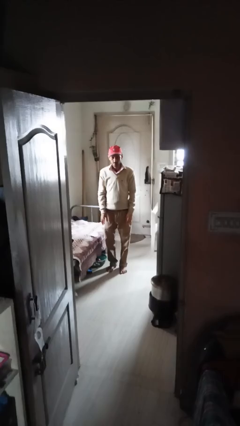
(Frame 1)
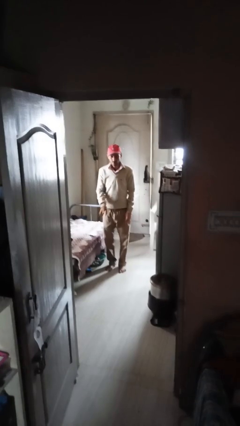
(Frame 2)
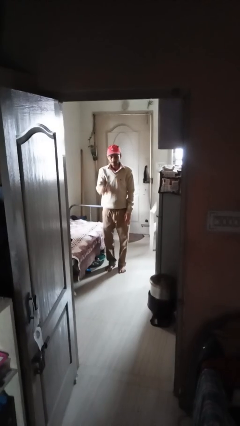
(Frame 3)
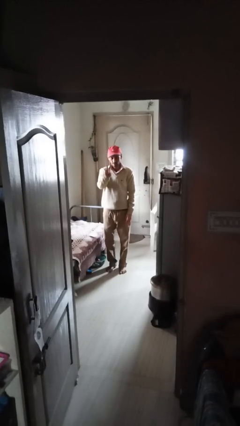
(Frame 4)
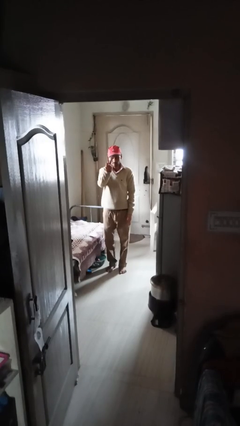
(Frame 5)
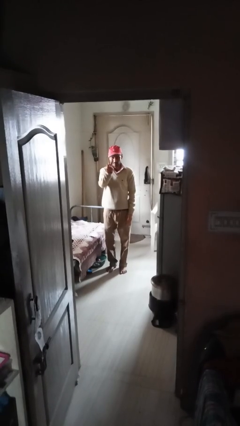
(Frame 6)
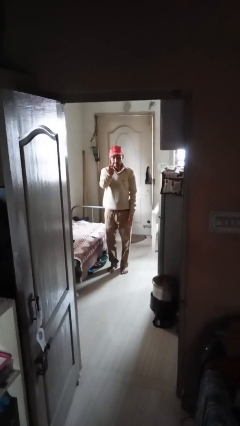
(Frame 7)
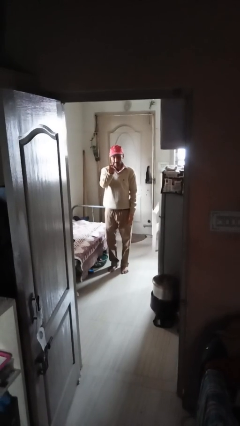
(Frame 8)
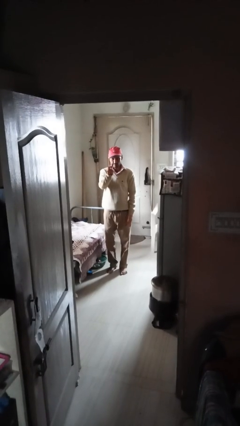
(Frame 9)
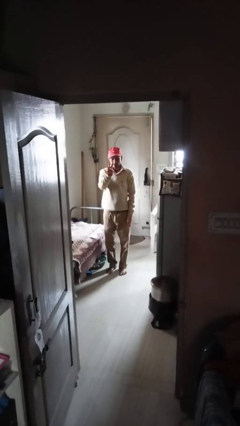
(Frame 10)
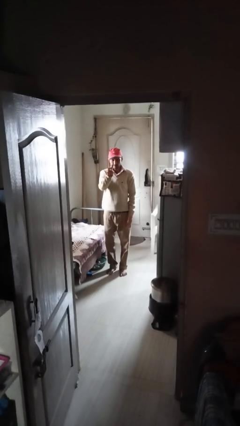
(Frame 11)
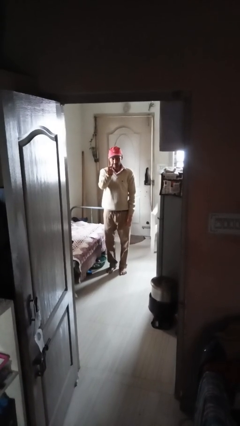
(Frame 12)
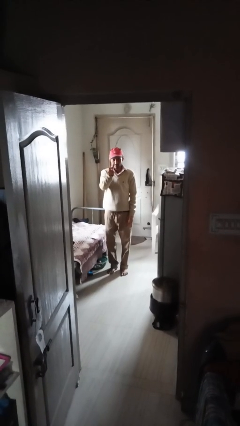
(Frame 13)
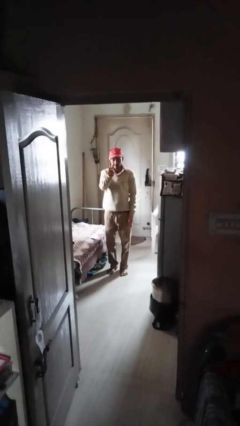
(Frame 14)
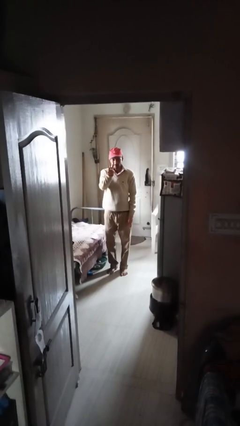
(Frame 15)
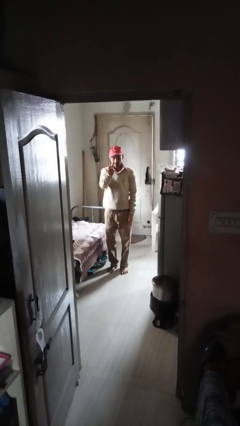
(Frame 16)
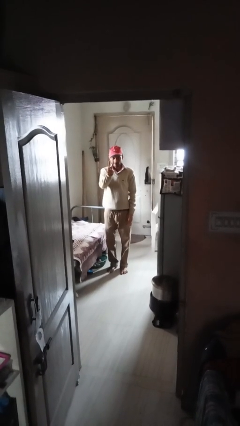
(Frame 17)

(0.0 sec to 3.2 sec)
person gestures peace

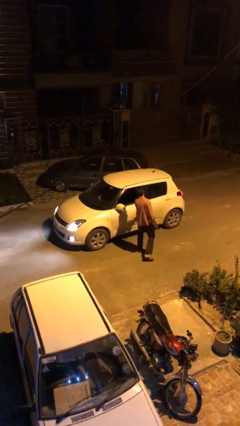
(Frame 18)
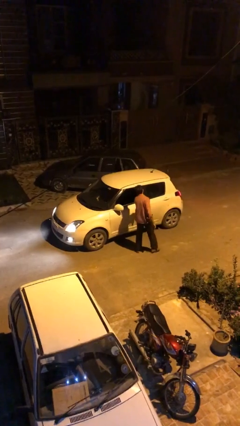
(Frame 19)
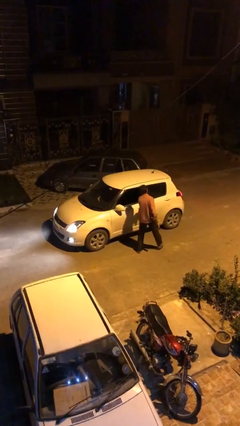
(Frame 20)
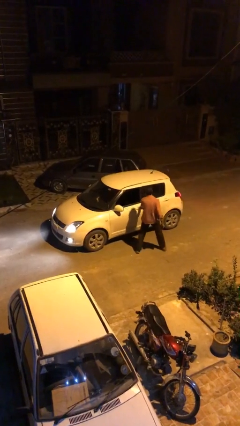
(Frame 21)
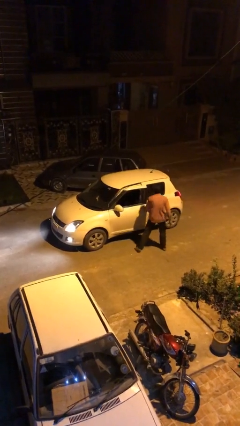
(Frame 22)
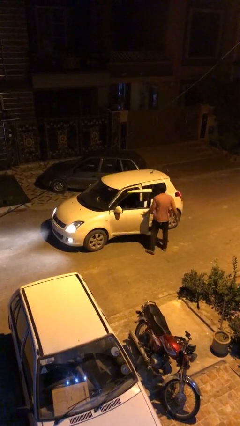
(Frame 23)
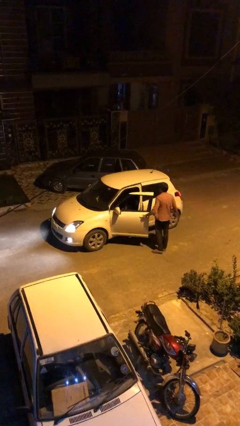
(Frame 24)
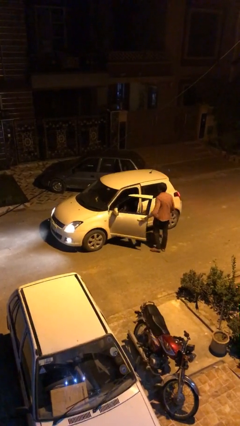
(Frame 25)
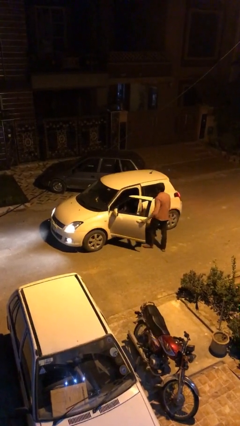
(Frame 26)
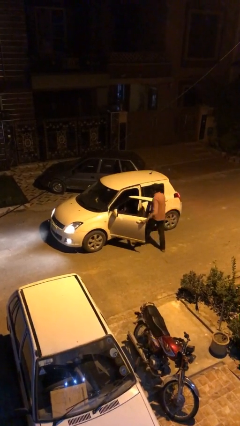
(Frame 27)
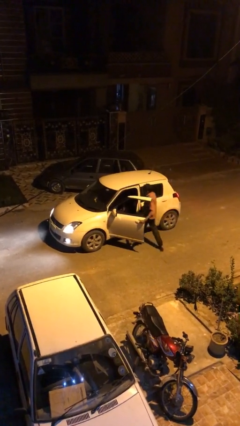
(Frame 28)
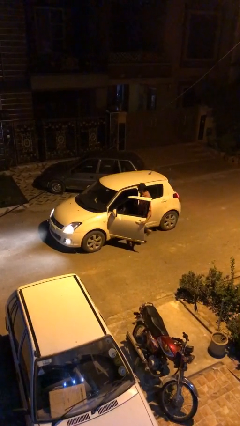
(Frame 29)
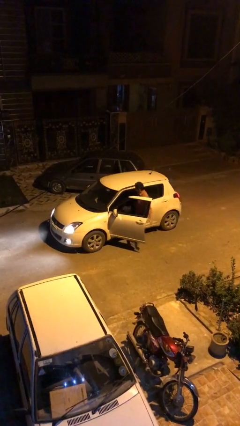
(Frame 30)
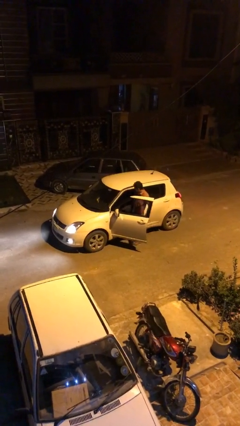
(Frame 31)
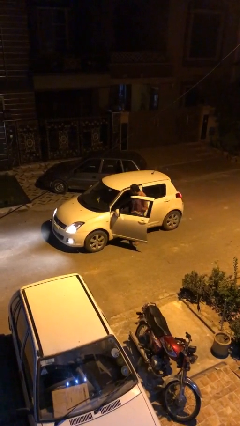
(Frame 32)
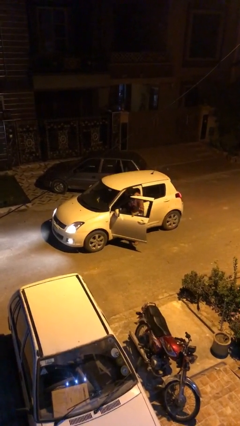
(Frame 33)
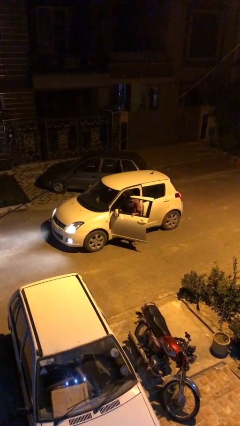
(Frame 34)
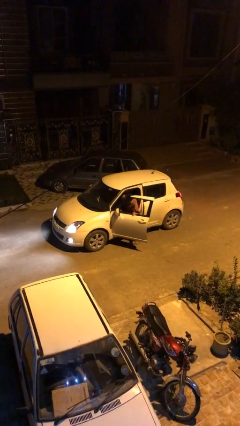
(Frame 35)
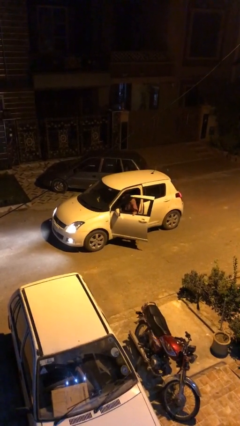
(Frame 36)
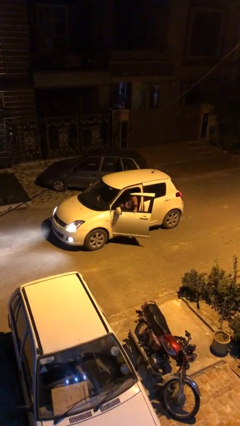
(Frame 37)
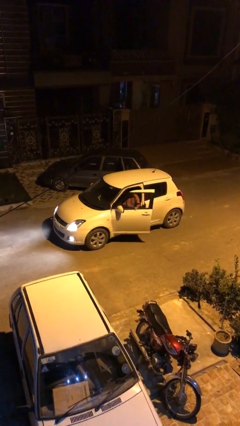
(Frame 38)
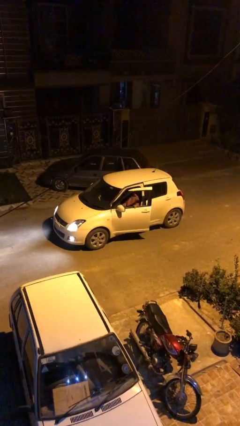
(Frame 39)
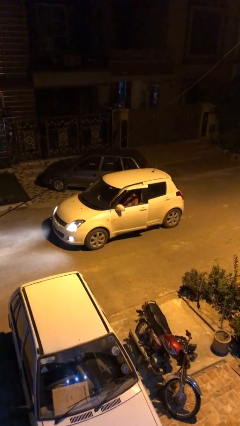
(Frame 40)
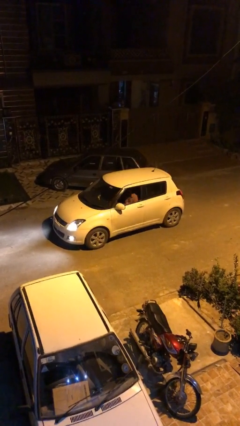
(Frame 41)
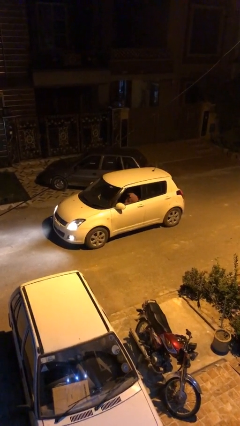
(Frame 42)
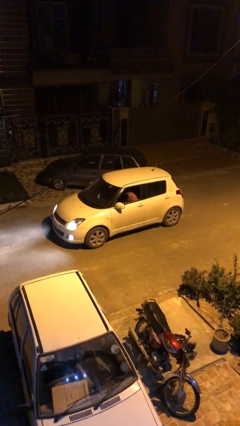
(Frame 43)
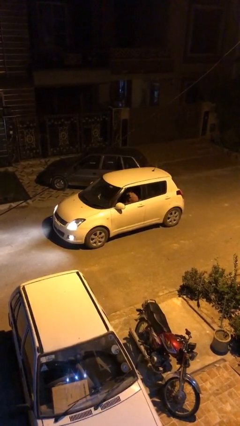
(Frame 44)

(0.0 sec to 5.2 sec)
car picks up person

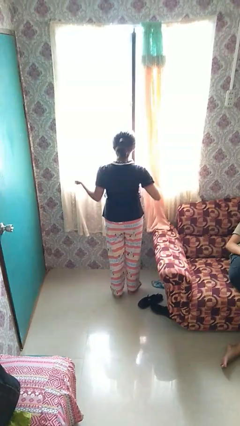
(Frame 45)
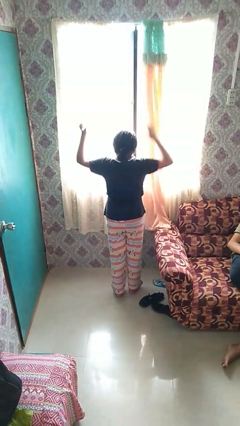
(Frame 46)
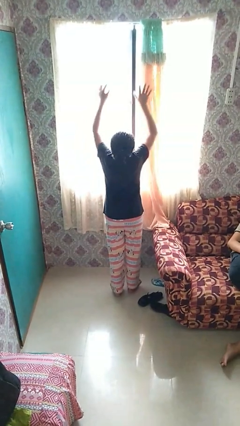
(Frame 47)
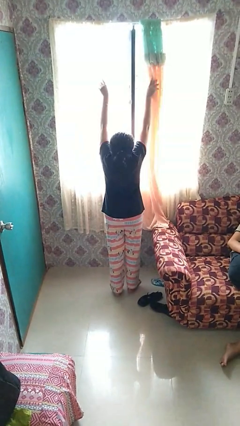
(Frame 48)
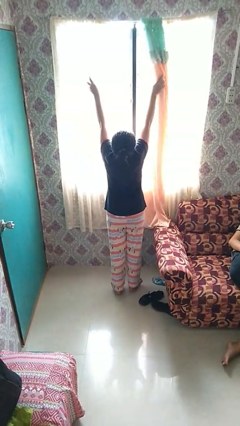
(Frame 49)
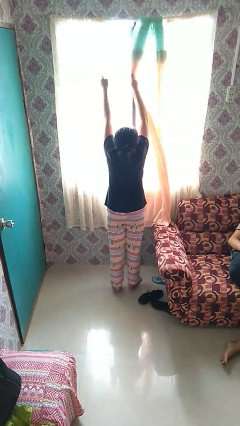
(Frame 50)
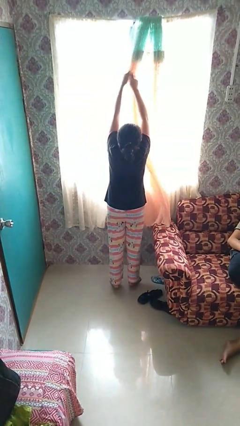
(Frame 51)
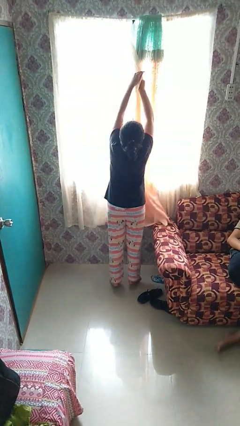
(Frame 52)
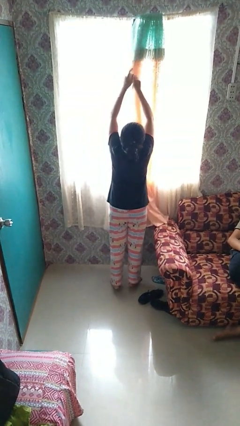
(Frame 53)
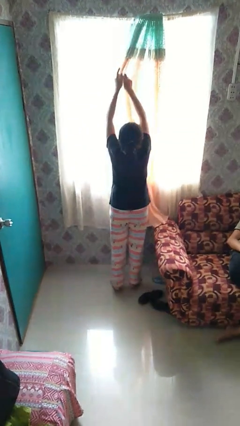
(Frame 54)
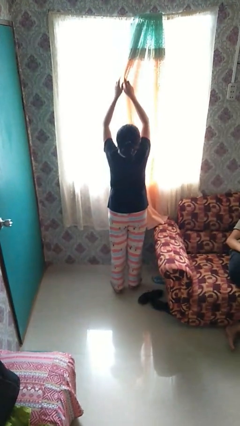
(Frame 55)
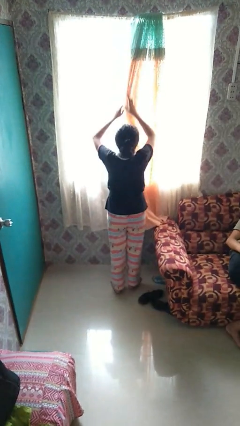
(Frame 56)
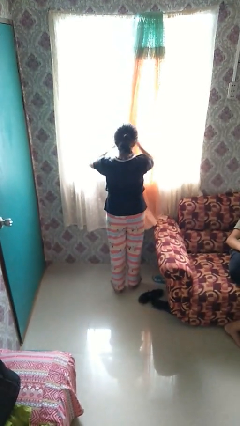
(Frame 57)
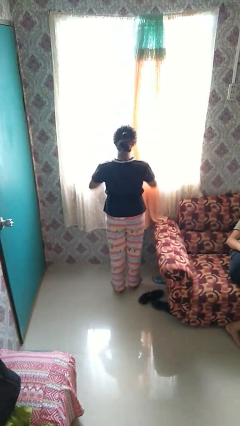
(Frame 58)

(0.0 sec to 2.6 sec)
person closes curtains

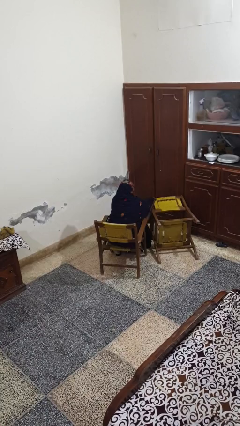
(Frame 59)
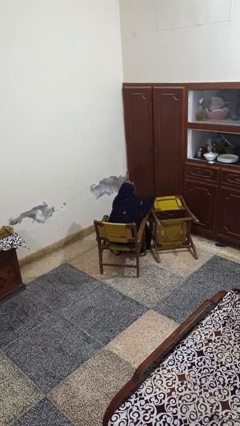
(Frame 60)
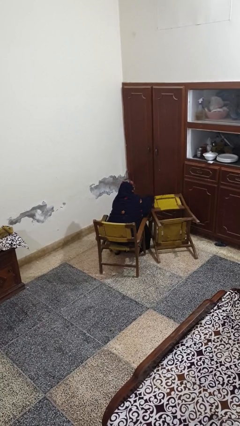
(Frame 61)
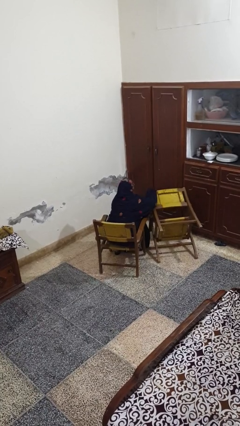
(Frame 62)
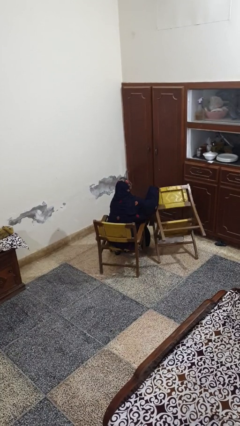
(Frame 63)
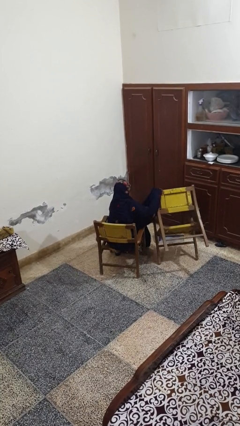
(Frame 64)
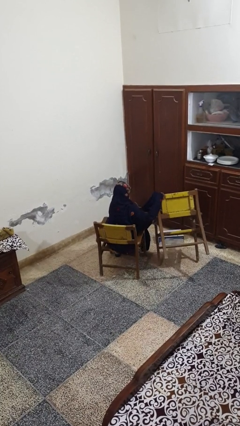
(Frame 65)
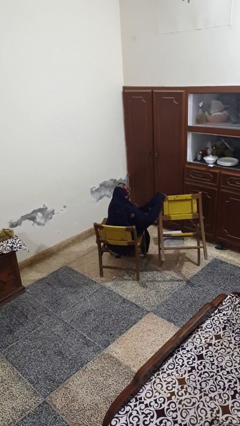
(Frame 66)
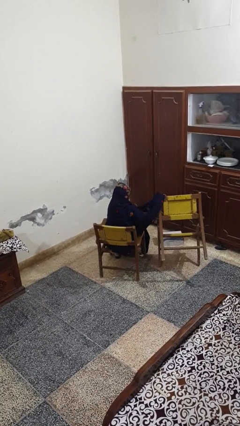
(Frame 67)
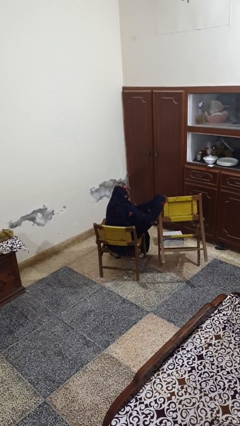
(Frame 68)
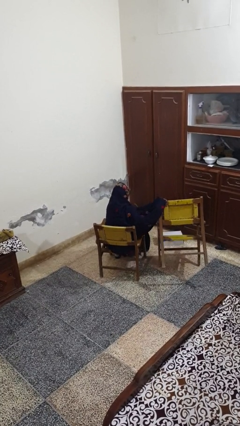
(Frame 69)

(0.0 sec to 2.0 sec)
person sets upright furniture

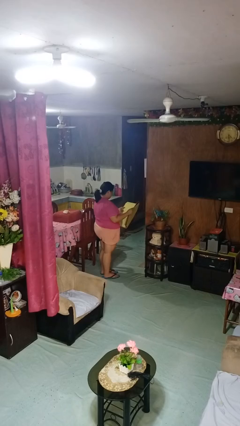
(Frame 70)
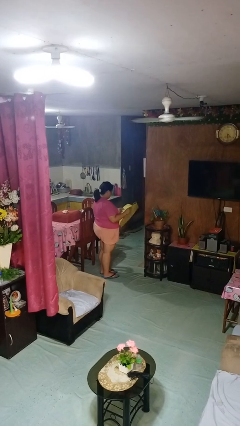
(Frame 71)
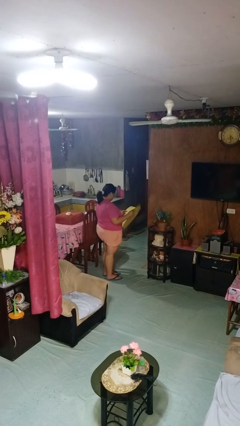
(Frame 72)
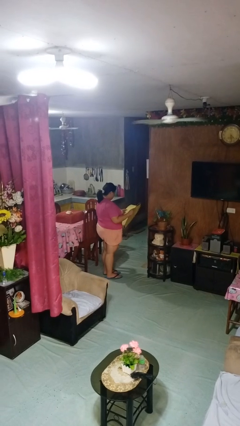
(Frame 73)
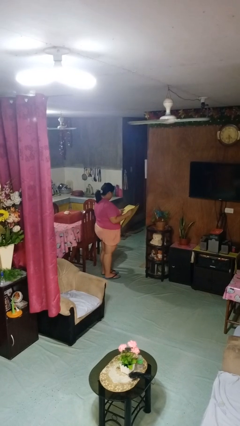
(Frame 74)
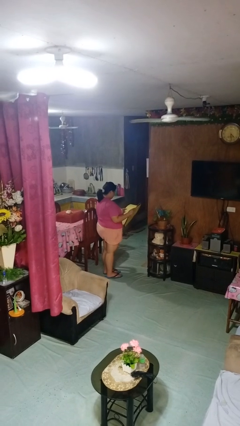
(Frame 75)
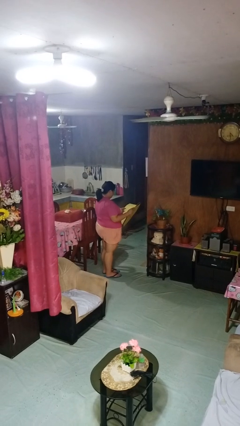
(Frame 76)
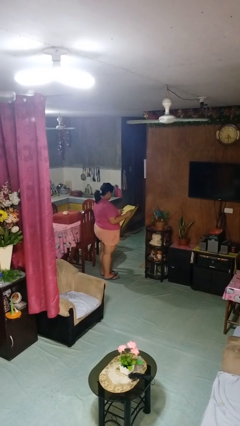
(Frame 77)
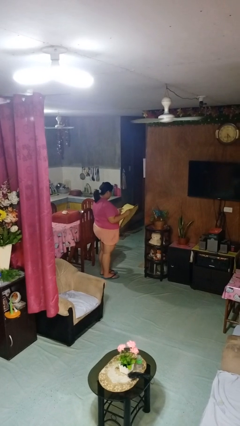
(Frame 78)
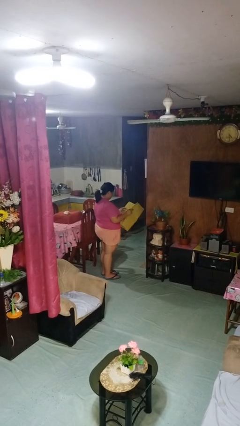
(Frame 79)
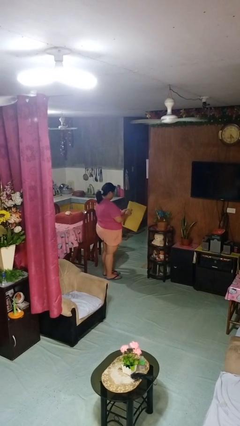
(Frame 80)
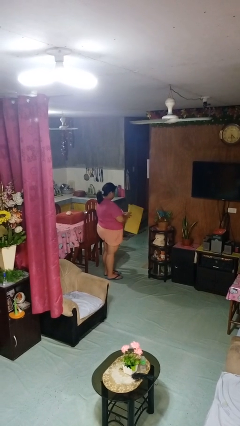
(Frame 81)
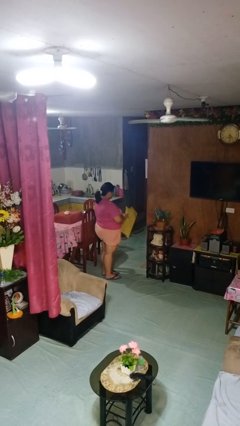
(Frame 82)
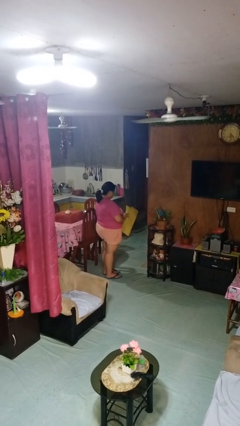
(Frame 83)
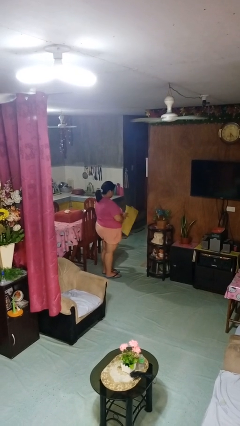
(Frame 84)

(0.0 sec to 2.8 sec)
person reads newspaper

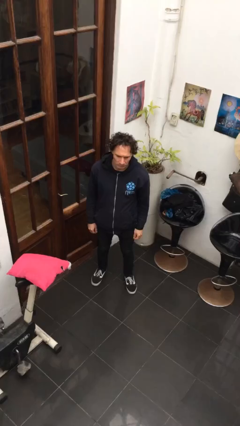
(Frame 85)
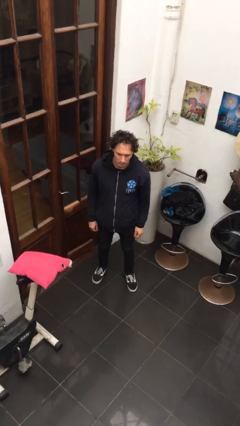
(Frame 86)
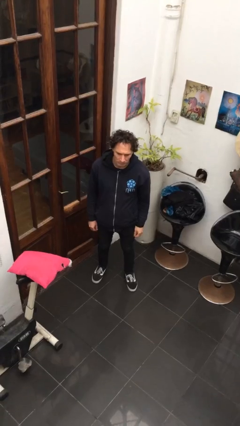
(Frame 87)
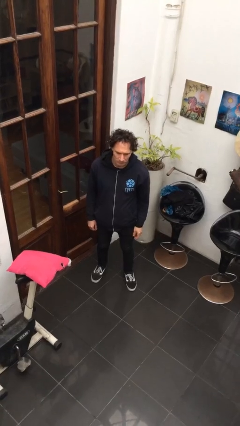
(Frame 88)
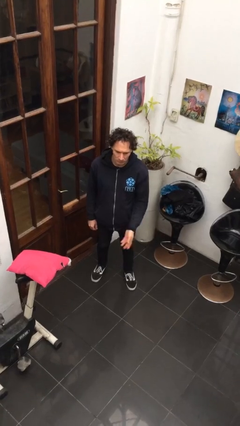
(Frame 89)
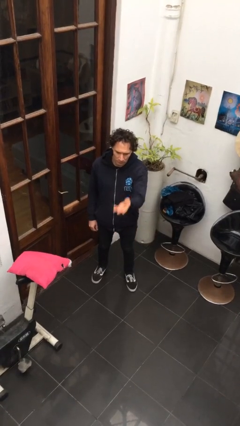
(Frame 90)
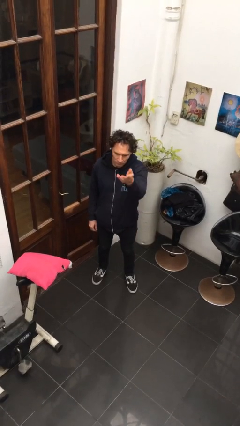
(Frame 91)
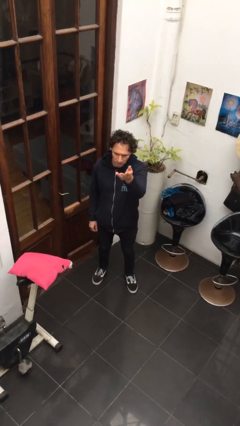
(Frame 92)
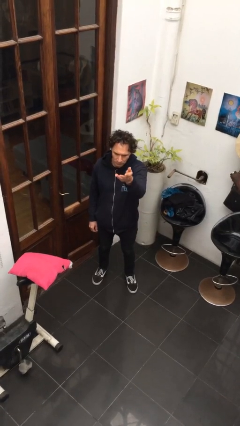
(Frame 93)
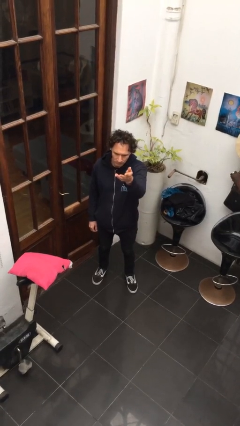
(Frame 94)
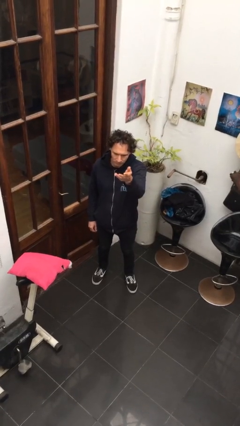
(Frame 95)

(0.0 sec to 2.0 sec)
person gestures swipe up
